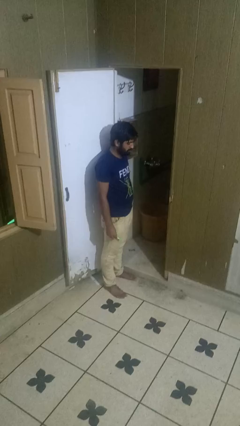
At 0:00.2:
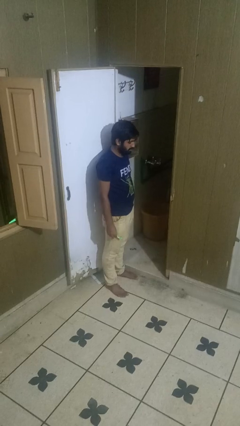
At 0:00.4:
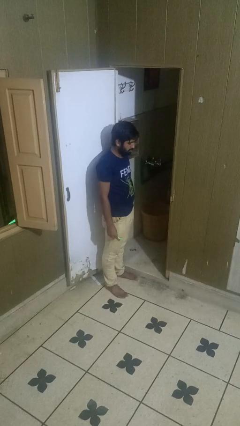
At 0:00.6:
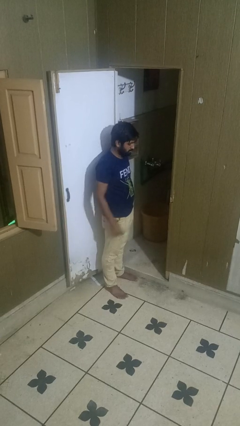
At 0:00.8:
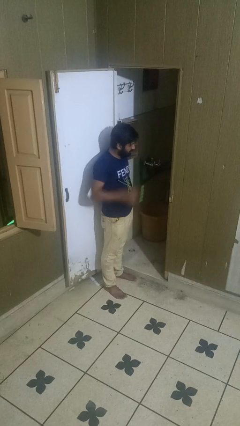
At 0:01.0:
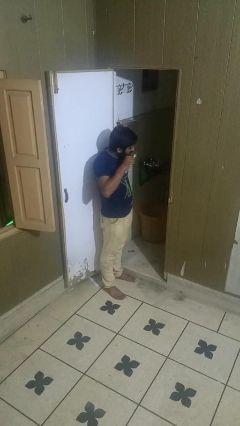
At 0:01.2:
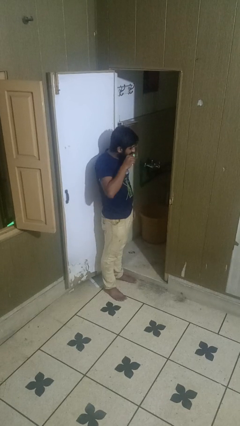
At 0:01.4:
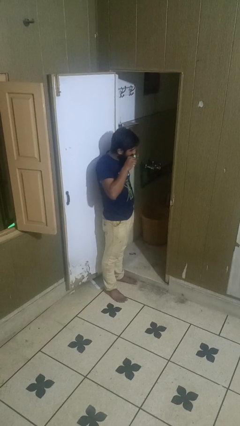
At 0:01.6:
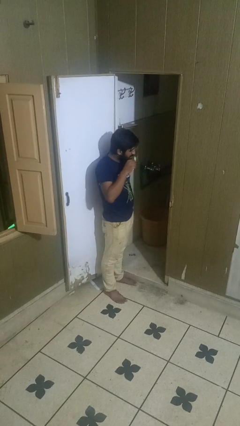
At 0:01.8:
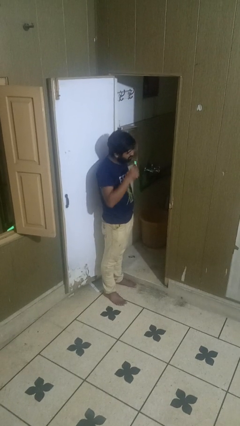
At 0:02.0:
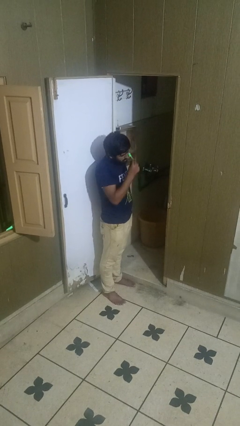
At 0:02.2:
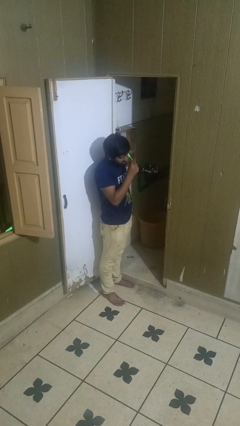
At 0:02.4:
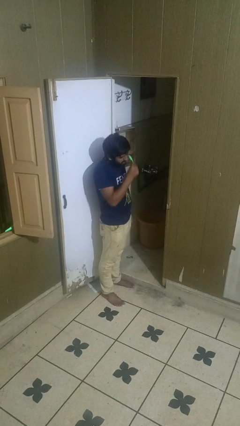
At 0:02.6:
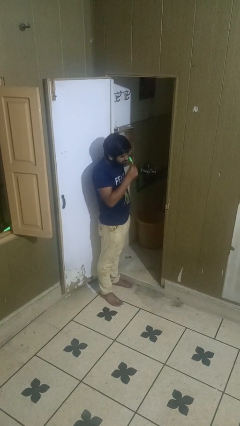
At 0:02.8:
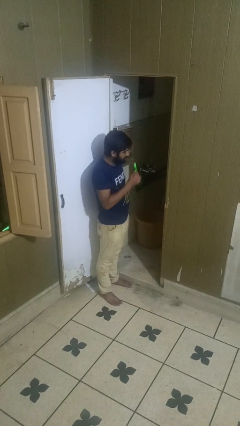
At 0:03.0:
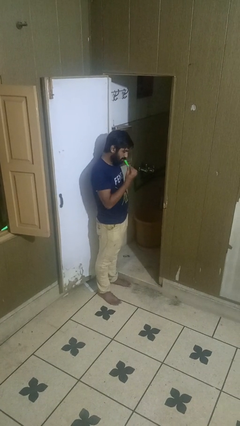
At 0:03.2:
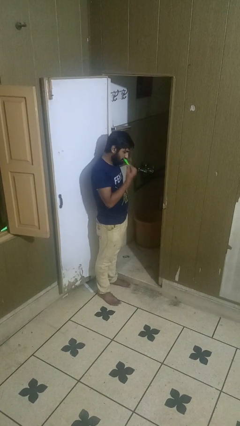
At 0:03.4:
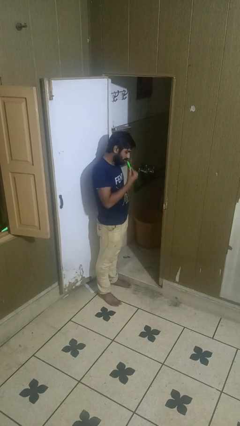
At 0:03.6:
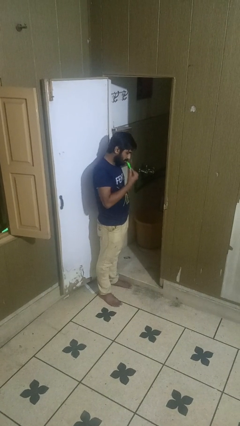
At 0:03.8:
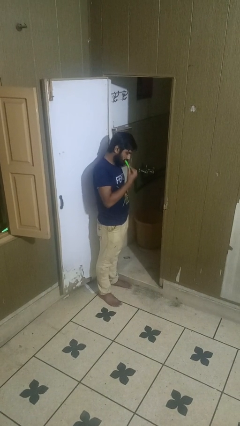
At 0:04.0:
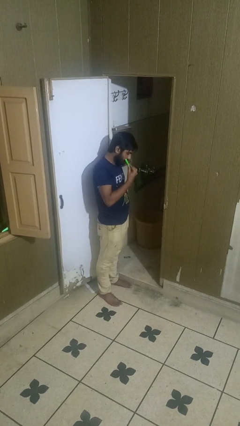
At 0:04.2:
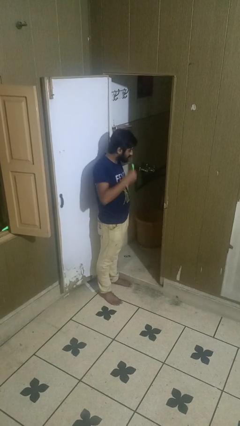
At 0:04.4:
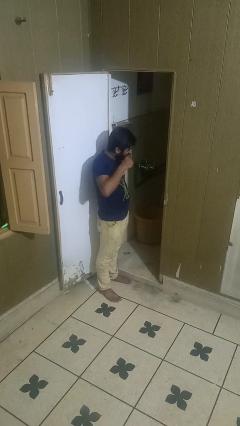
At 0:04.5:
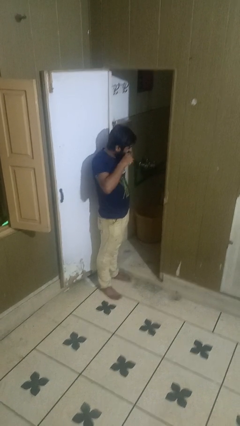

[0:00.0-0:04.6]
person brushes teeth

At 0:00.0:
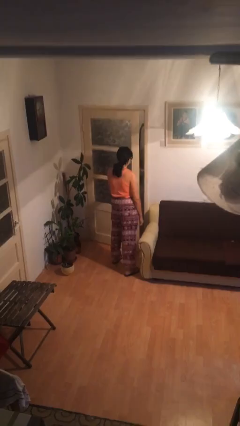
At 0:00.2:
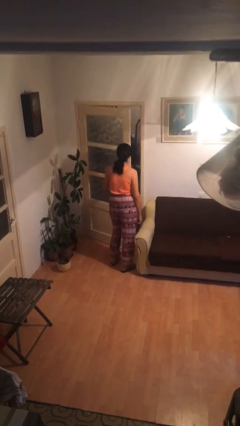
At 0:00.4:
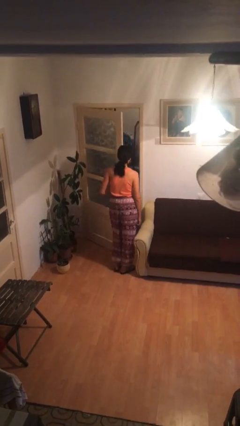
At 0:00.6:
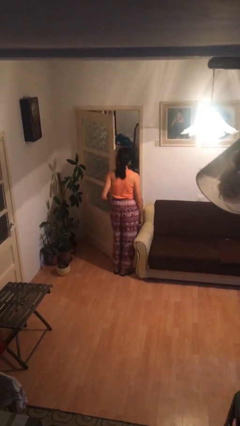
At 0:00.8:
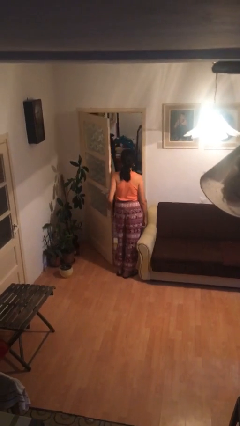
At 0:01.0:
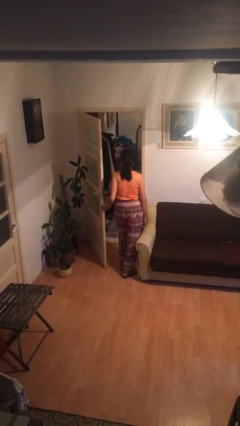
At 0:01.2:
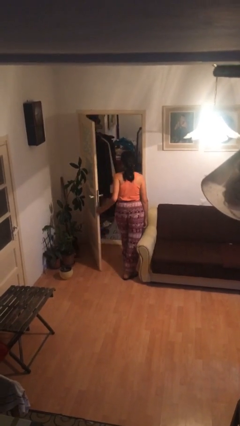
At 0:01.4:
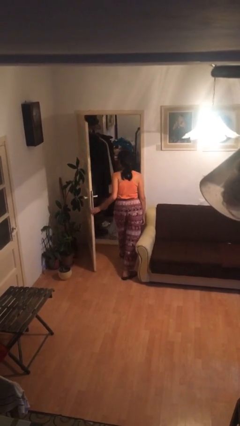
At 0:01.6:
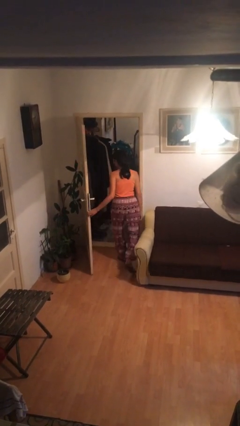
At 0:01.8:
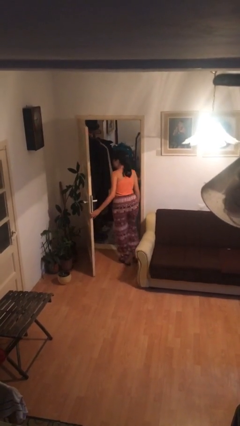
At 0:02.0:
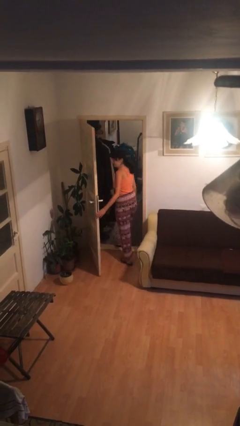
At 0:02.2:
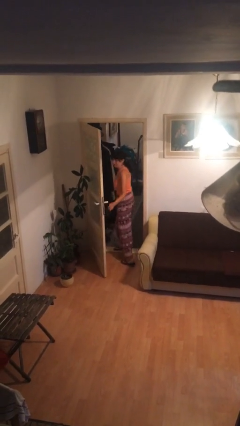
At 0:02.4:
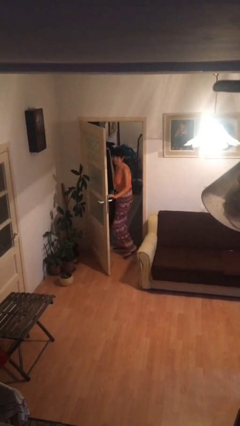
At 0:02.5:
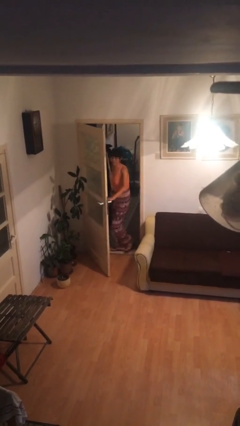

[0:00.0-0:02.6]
person exits scene through structure

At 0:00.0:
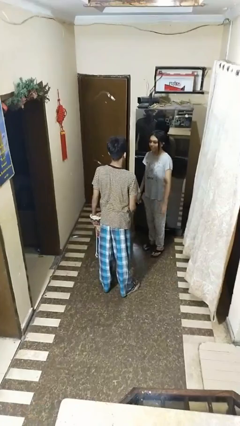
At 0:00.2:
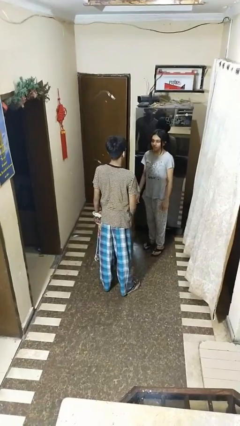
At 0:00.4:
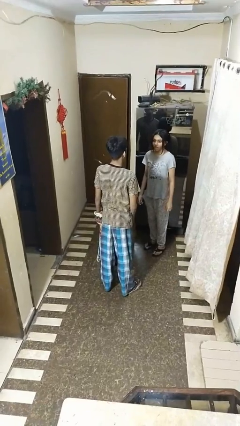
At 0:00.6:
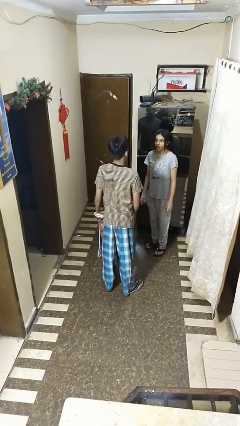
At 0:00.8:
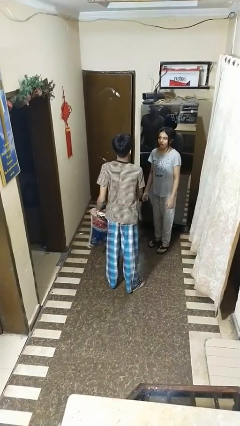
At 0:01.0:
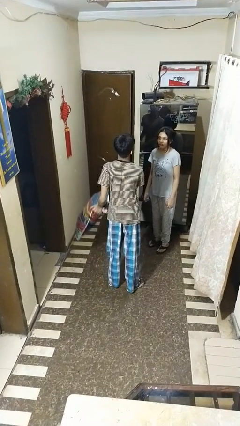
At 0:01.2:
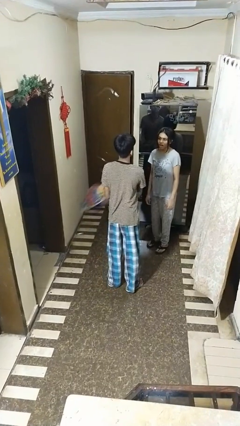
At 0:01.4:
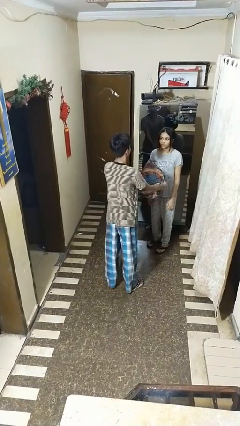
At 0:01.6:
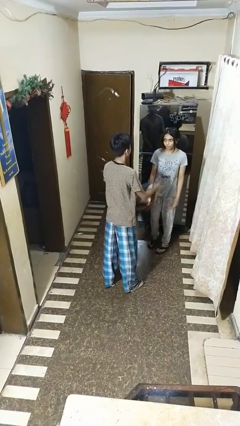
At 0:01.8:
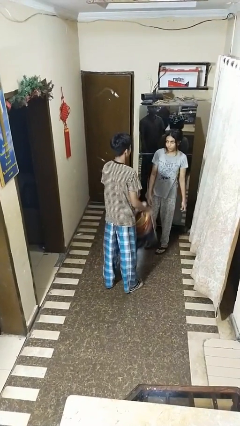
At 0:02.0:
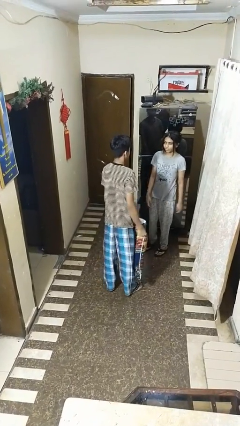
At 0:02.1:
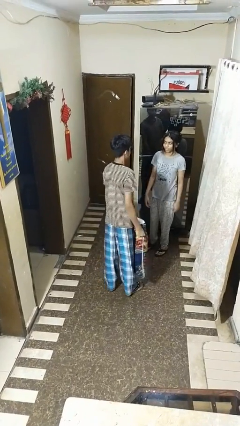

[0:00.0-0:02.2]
person hits person with pillow

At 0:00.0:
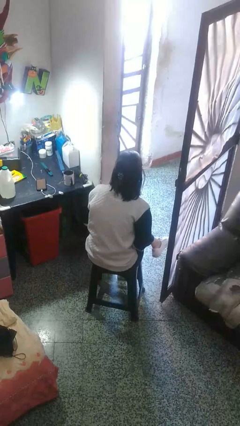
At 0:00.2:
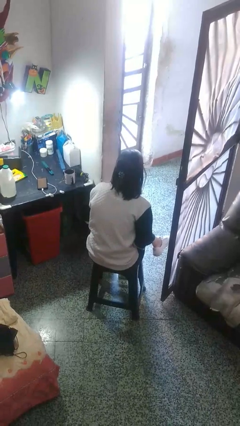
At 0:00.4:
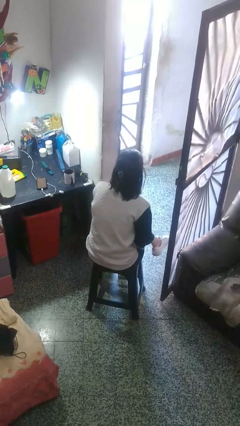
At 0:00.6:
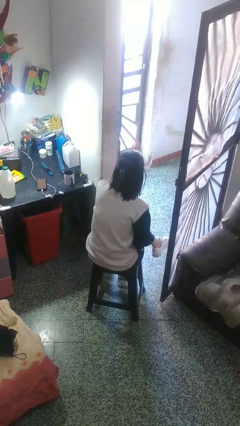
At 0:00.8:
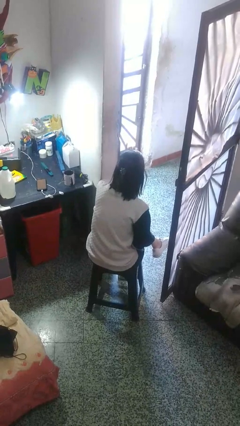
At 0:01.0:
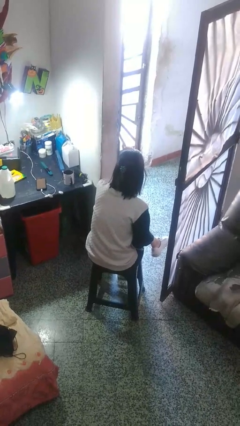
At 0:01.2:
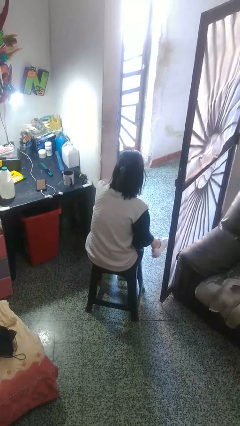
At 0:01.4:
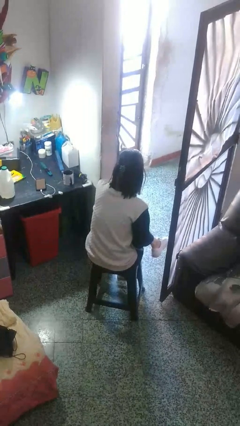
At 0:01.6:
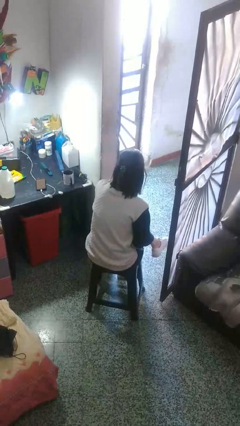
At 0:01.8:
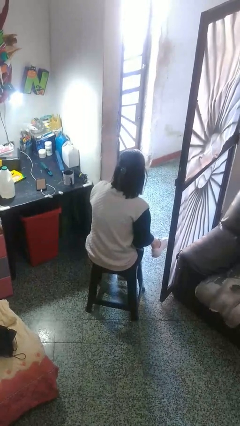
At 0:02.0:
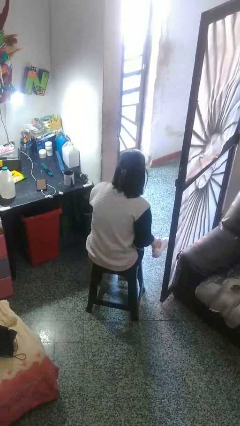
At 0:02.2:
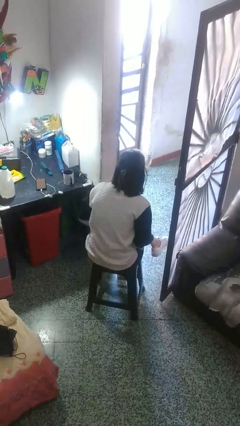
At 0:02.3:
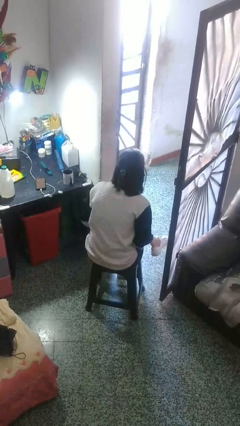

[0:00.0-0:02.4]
person gestures come here

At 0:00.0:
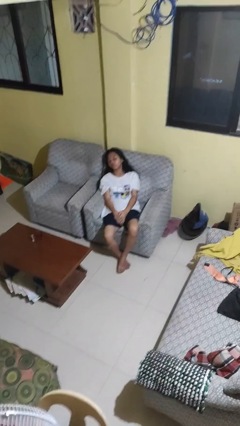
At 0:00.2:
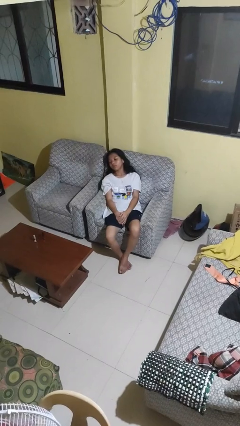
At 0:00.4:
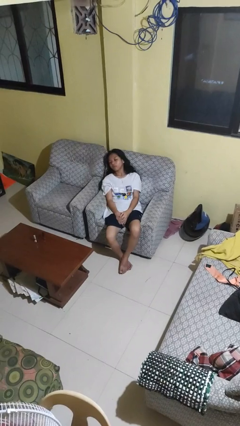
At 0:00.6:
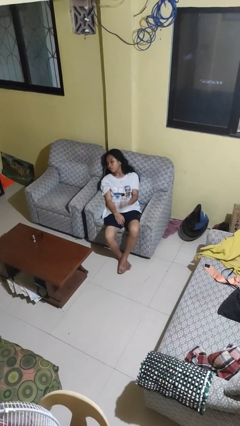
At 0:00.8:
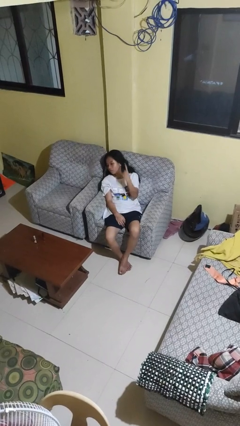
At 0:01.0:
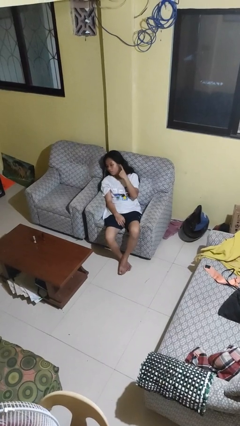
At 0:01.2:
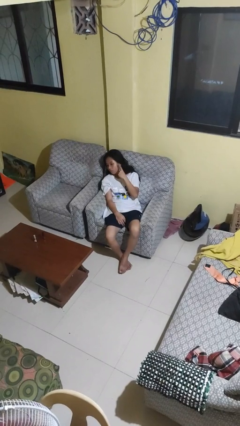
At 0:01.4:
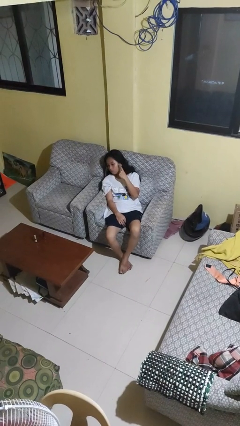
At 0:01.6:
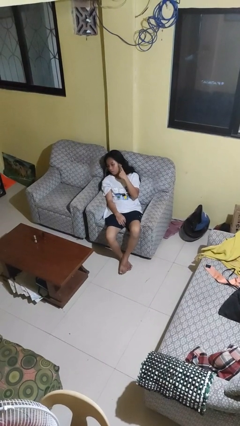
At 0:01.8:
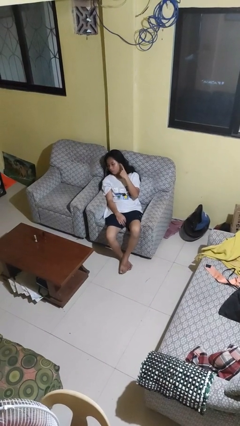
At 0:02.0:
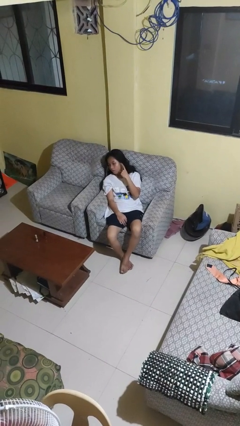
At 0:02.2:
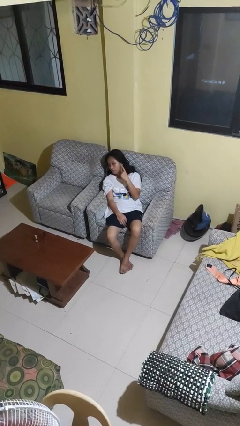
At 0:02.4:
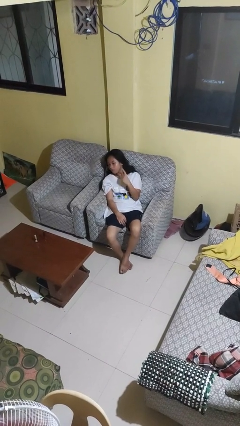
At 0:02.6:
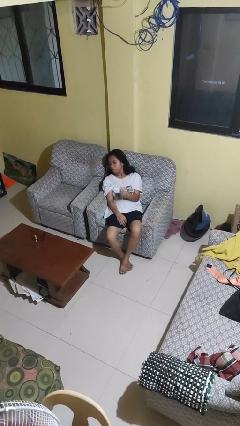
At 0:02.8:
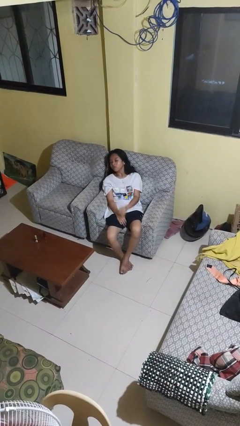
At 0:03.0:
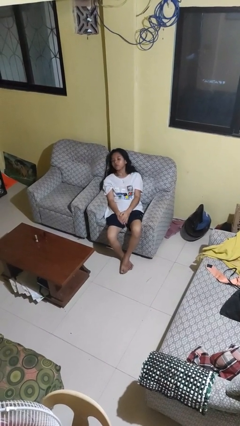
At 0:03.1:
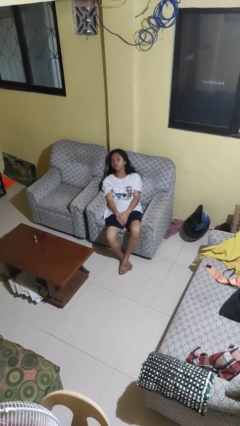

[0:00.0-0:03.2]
person gestures listen closely

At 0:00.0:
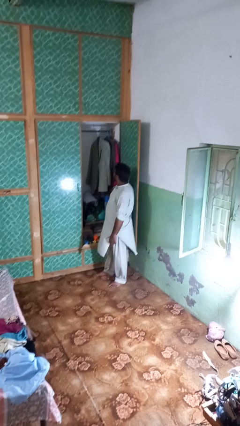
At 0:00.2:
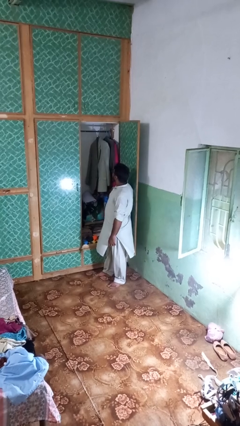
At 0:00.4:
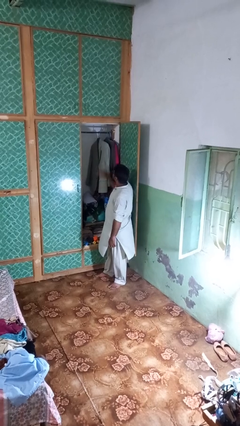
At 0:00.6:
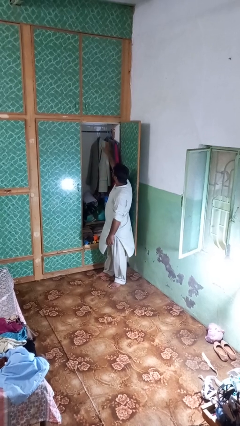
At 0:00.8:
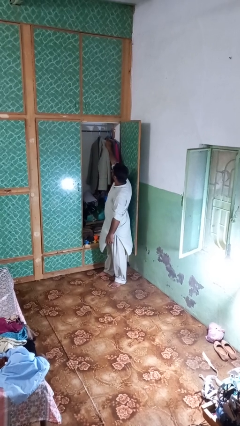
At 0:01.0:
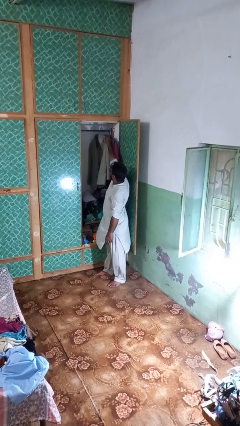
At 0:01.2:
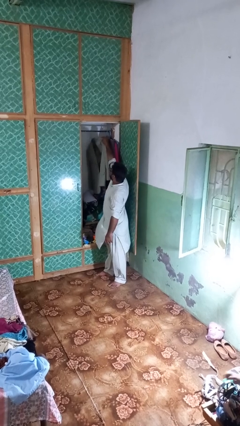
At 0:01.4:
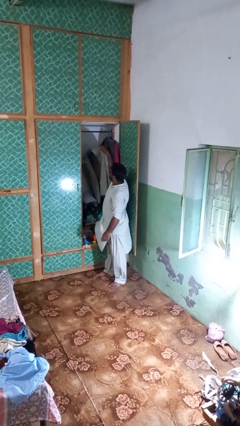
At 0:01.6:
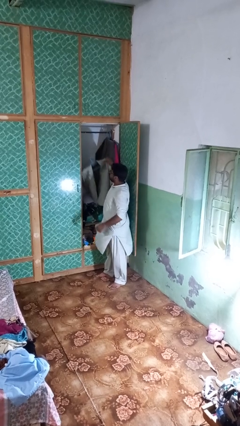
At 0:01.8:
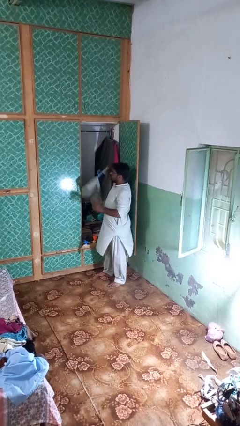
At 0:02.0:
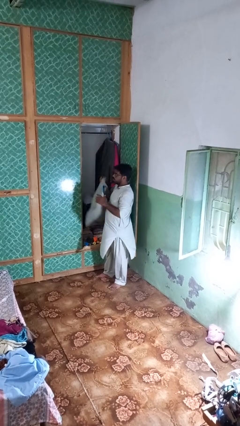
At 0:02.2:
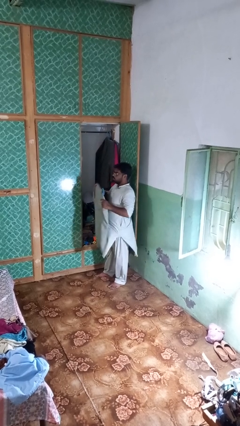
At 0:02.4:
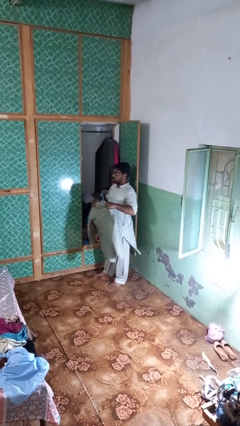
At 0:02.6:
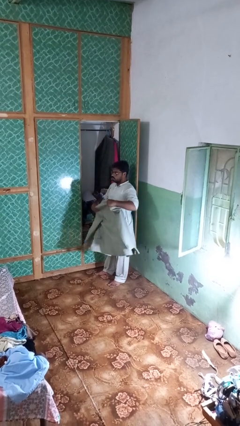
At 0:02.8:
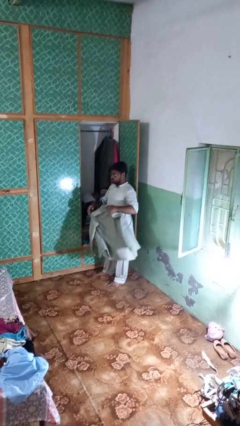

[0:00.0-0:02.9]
person takes clothes from closet
